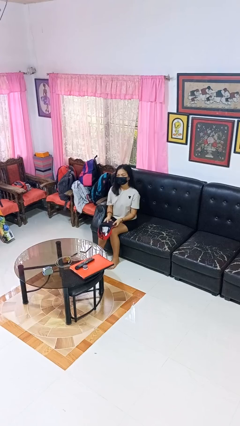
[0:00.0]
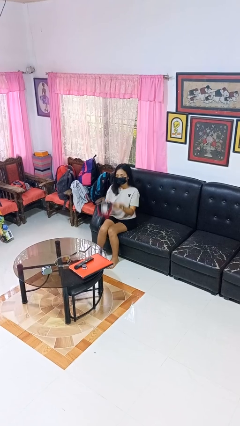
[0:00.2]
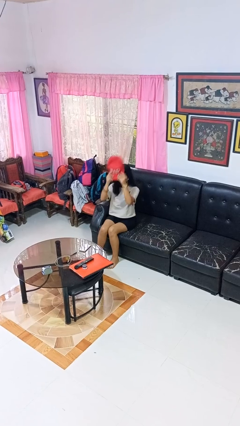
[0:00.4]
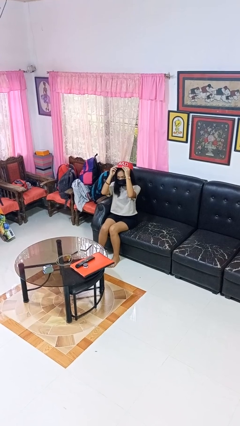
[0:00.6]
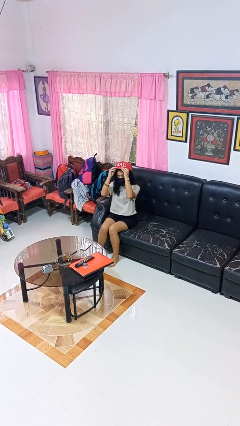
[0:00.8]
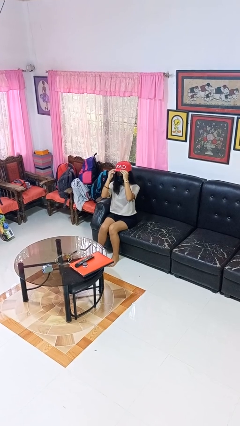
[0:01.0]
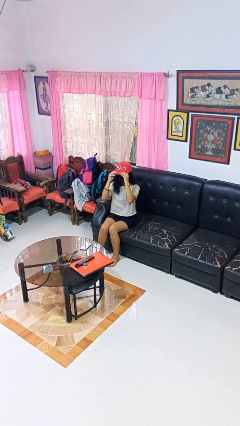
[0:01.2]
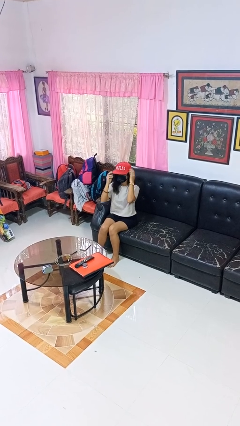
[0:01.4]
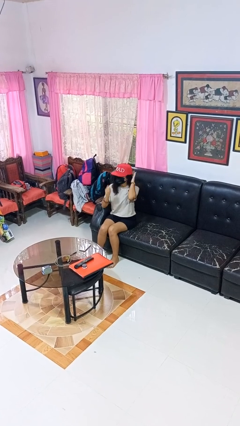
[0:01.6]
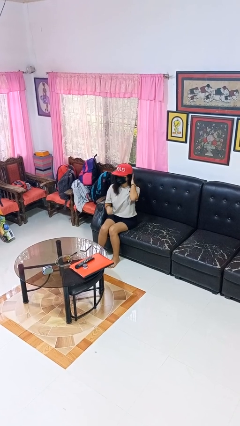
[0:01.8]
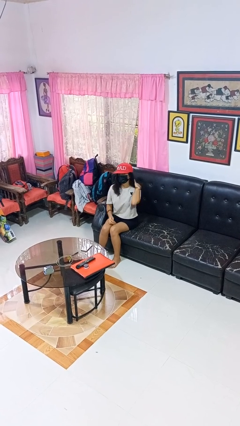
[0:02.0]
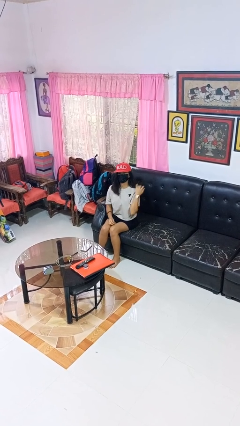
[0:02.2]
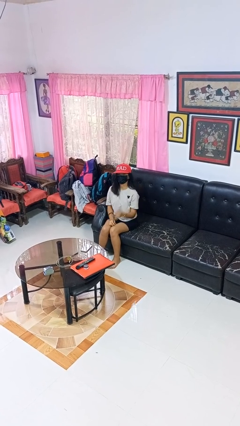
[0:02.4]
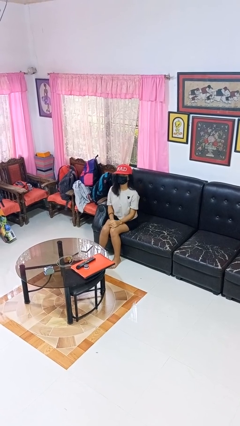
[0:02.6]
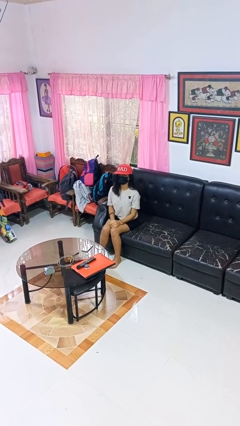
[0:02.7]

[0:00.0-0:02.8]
person puts on hat

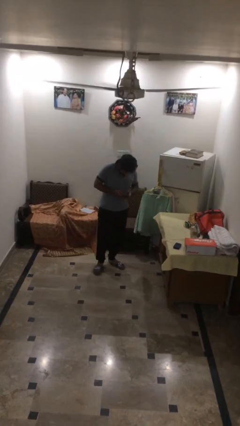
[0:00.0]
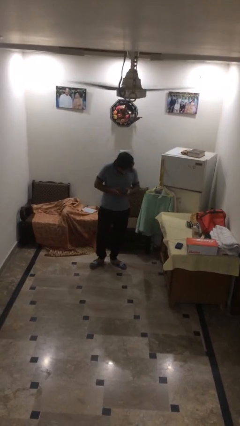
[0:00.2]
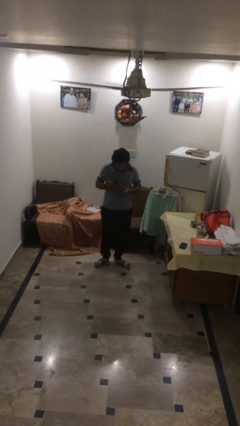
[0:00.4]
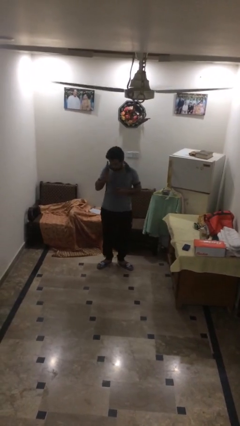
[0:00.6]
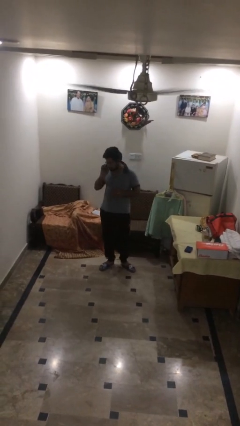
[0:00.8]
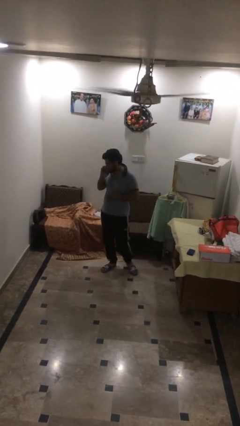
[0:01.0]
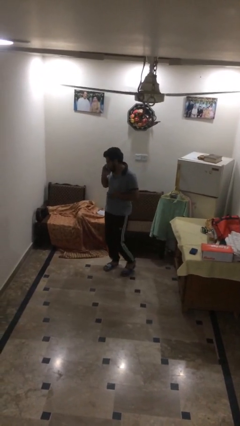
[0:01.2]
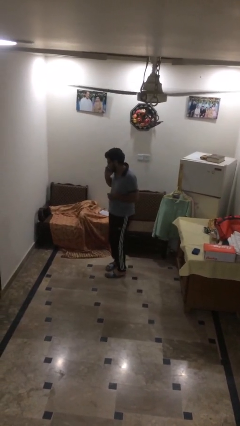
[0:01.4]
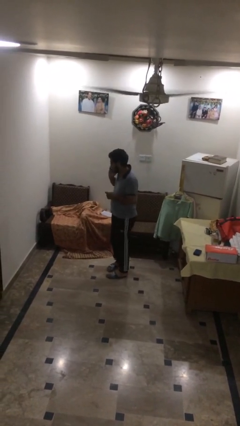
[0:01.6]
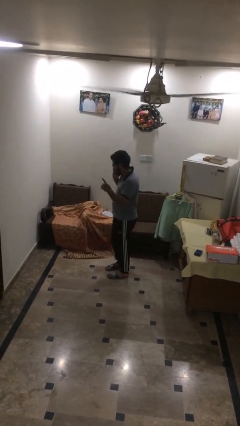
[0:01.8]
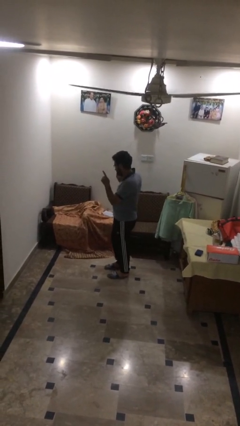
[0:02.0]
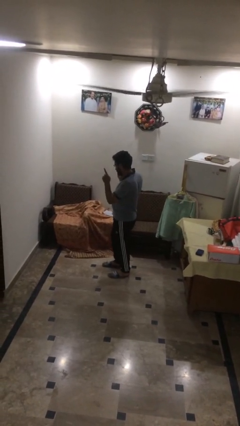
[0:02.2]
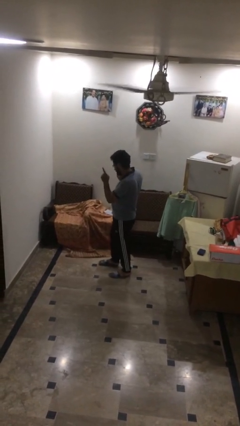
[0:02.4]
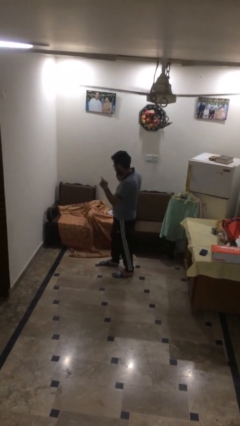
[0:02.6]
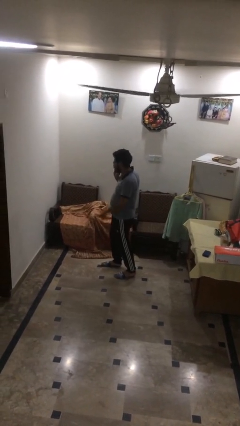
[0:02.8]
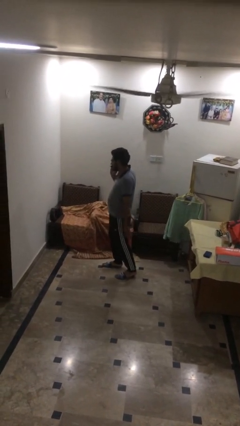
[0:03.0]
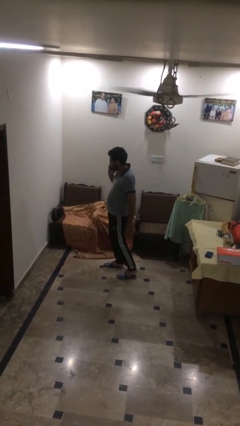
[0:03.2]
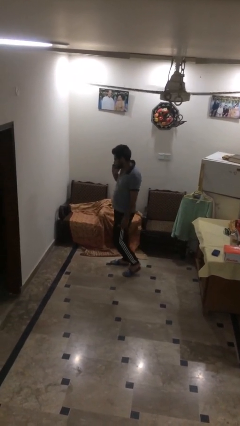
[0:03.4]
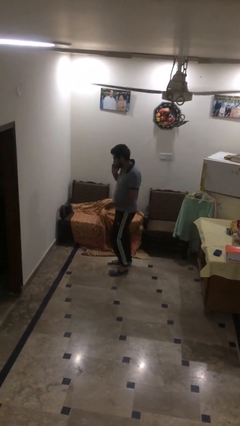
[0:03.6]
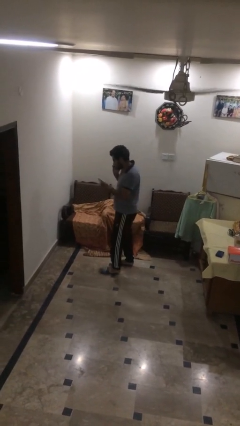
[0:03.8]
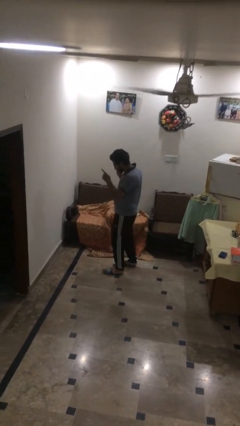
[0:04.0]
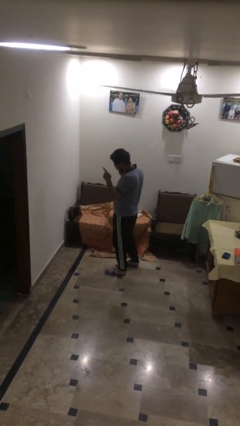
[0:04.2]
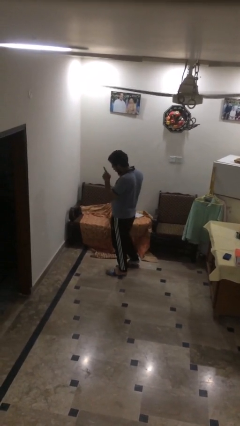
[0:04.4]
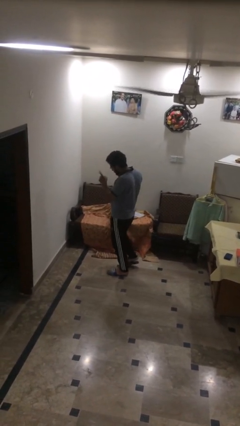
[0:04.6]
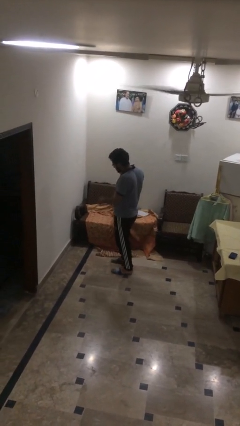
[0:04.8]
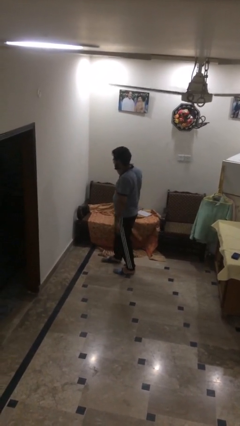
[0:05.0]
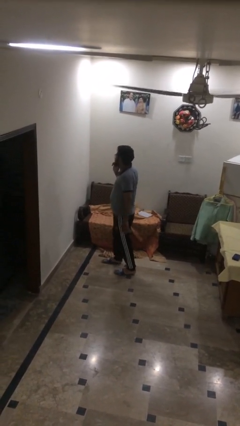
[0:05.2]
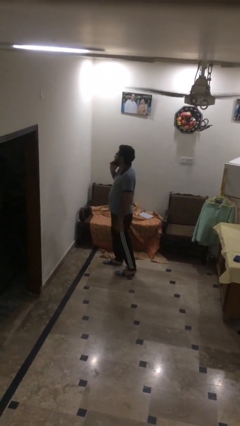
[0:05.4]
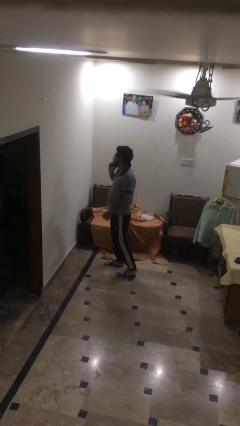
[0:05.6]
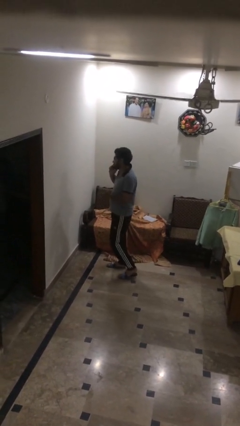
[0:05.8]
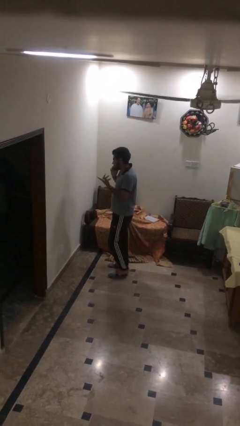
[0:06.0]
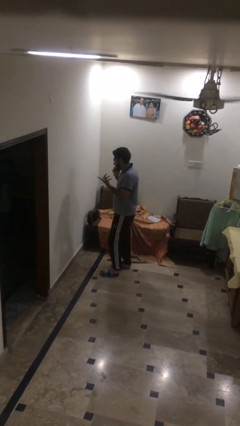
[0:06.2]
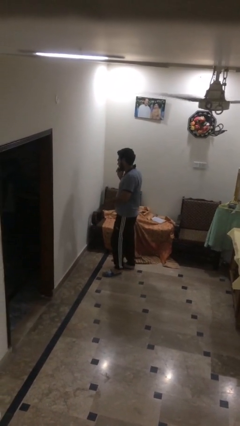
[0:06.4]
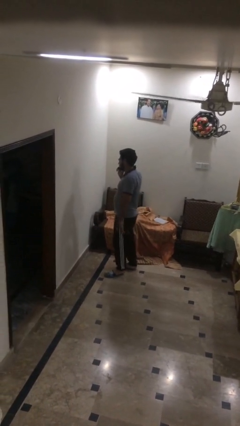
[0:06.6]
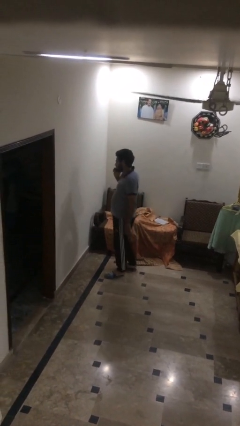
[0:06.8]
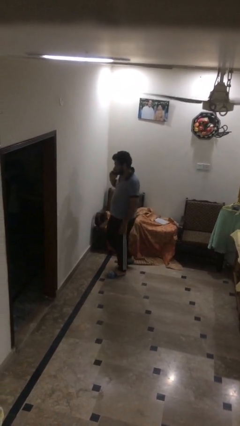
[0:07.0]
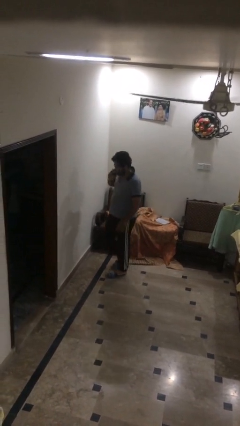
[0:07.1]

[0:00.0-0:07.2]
person talks on phone

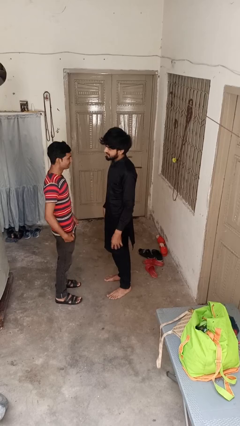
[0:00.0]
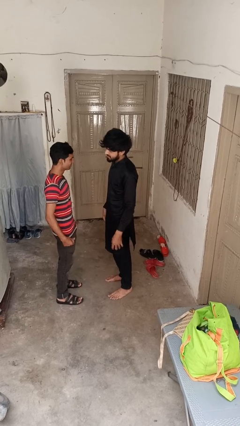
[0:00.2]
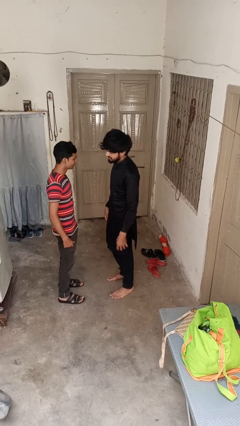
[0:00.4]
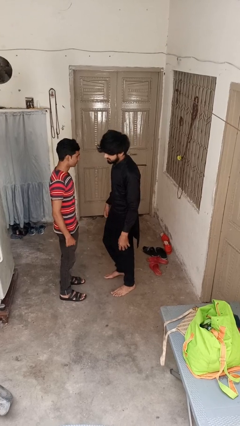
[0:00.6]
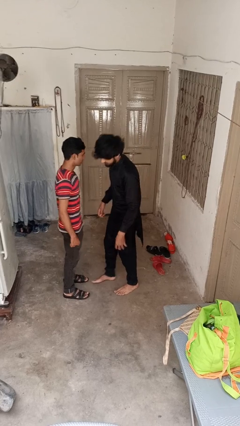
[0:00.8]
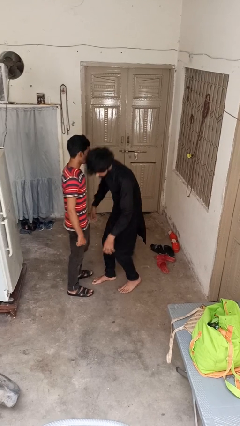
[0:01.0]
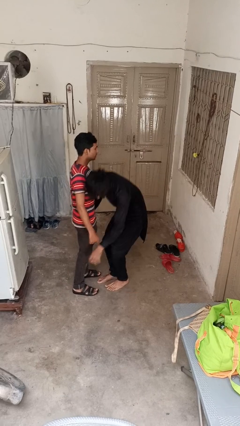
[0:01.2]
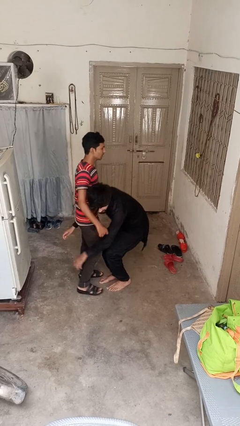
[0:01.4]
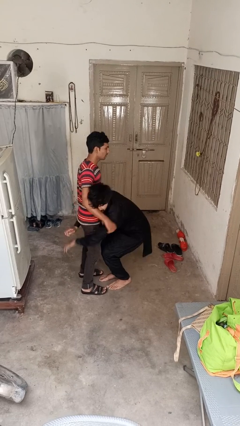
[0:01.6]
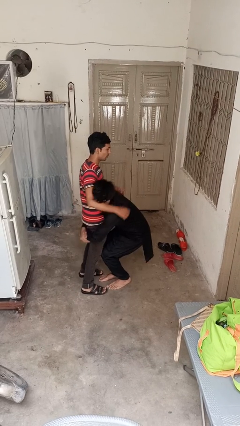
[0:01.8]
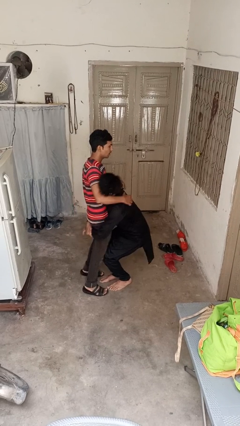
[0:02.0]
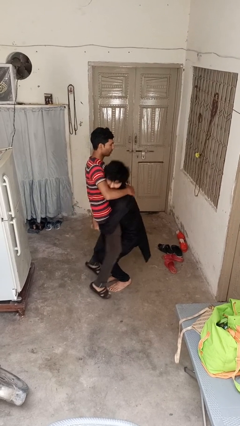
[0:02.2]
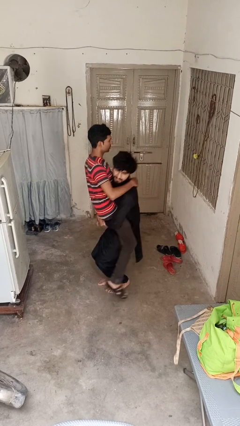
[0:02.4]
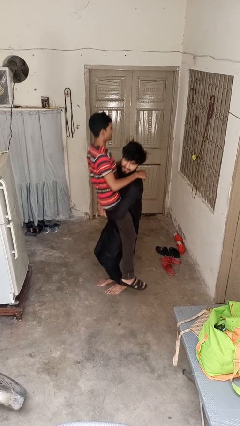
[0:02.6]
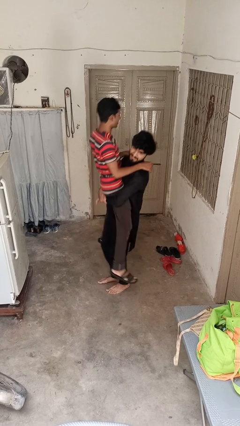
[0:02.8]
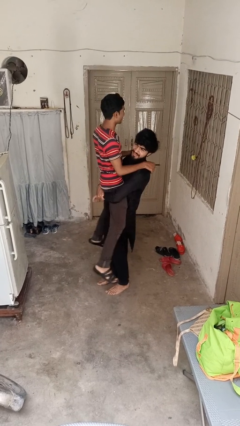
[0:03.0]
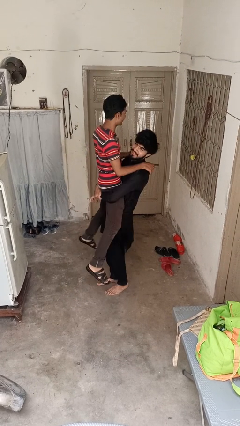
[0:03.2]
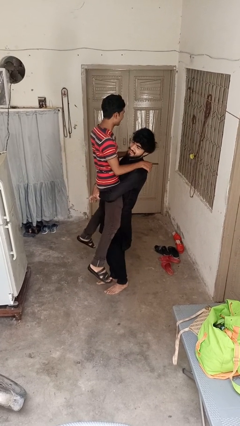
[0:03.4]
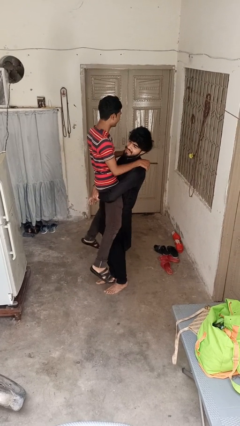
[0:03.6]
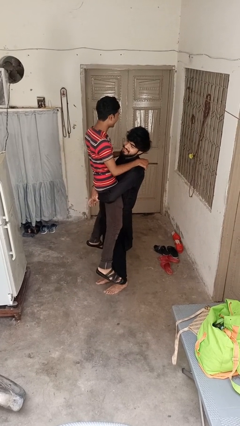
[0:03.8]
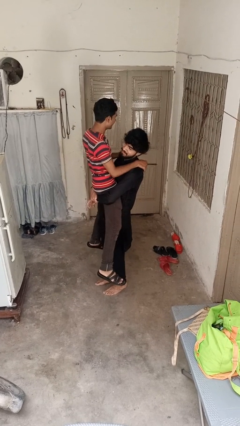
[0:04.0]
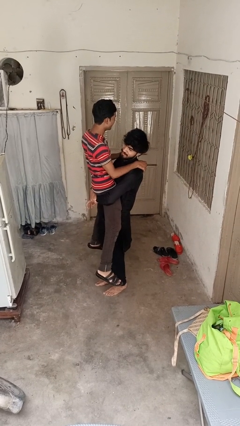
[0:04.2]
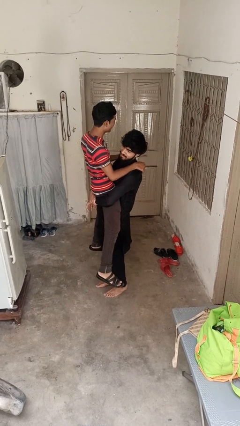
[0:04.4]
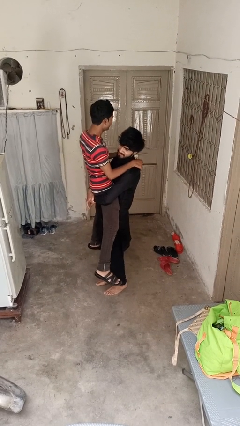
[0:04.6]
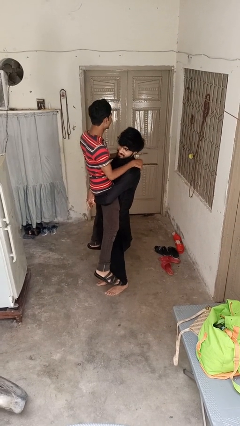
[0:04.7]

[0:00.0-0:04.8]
person picks up person

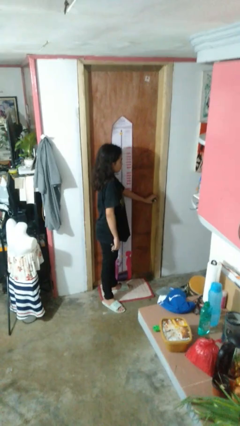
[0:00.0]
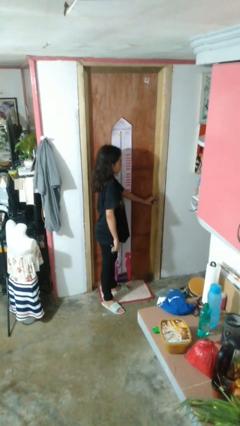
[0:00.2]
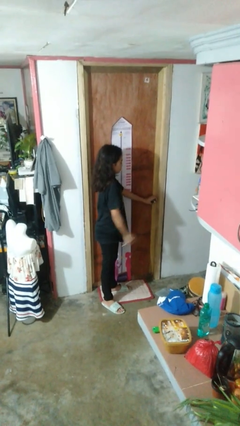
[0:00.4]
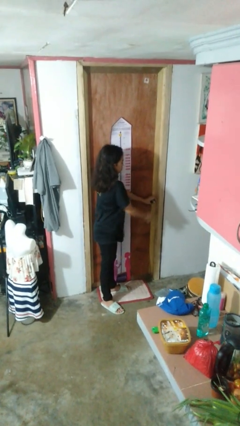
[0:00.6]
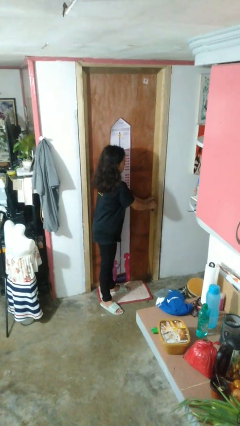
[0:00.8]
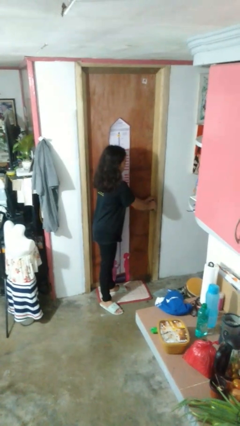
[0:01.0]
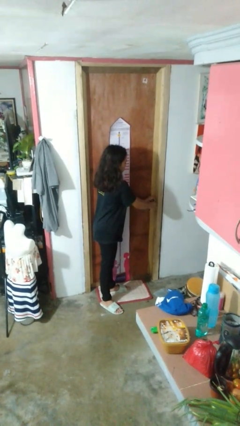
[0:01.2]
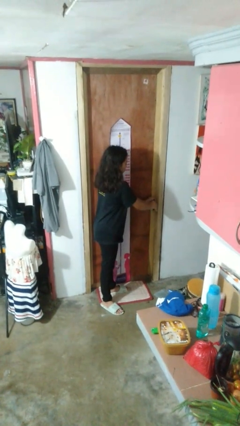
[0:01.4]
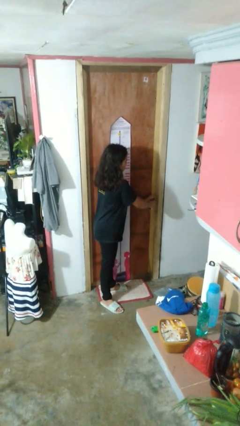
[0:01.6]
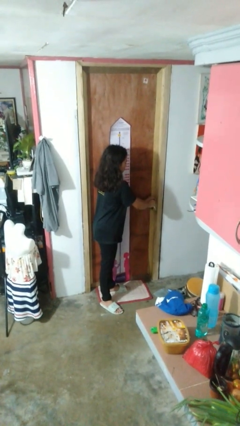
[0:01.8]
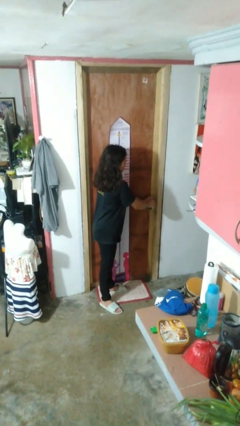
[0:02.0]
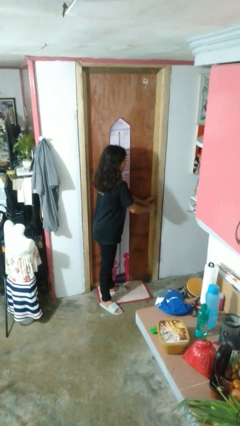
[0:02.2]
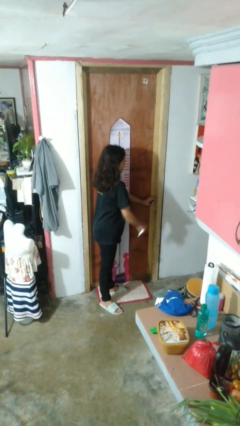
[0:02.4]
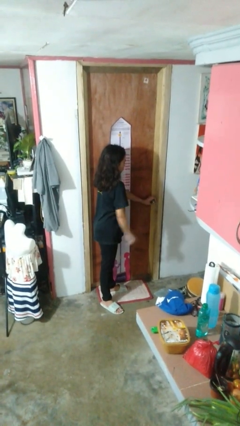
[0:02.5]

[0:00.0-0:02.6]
person locks door with keys

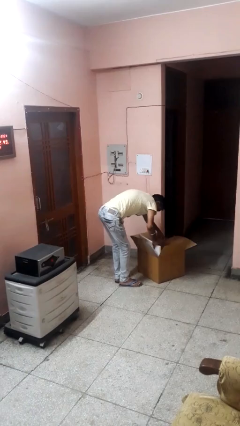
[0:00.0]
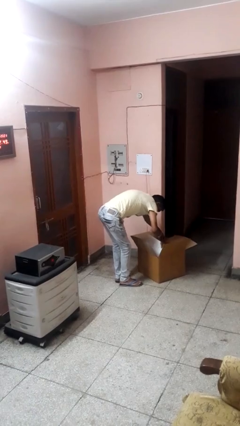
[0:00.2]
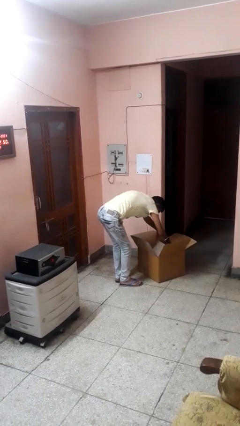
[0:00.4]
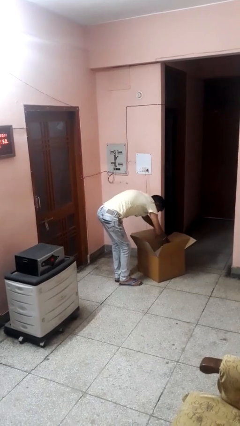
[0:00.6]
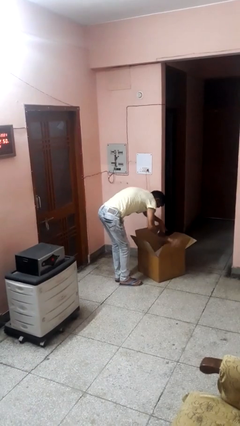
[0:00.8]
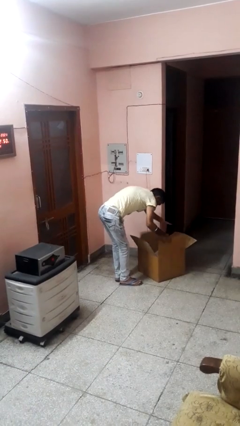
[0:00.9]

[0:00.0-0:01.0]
person searches in box
